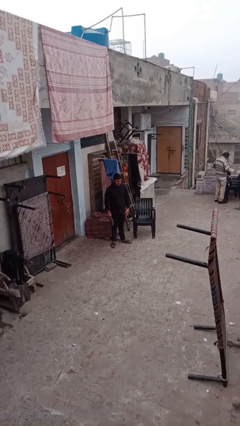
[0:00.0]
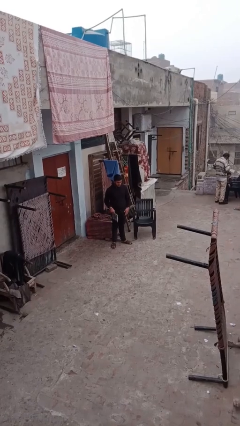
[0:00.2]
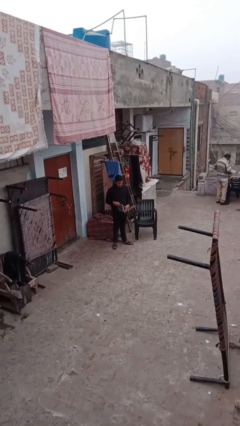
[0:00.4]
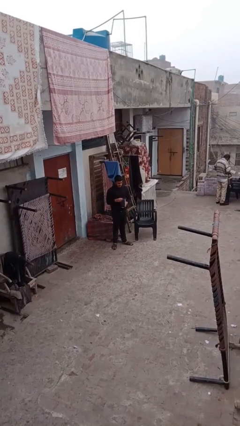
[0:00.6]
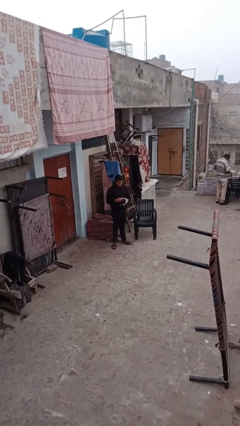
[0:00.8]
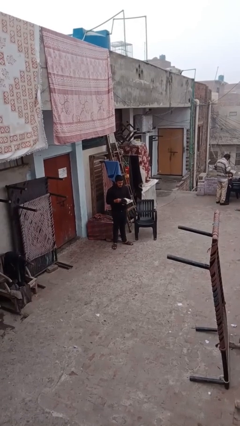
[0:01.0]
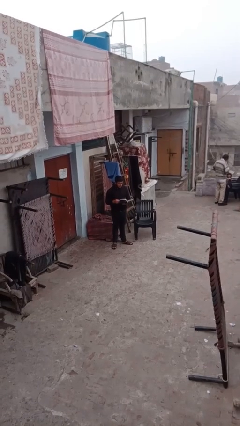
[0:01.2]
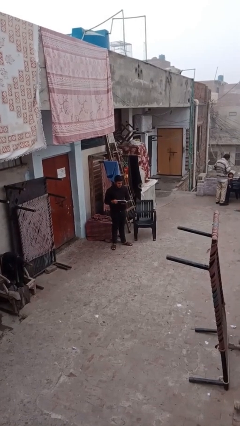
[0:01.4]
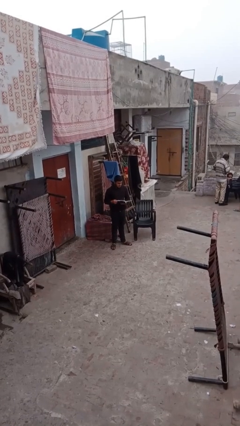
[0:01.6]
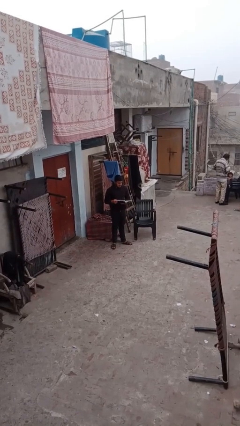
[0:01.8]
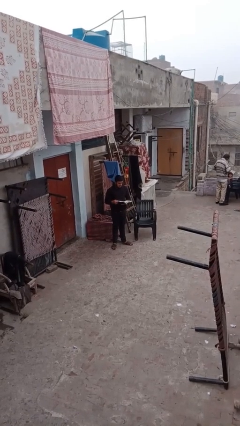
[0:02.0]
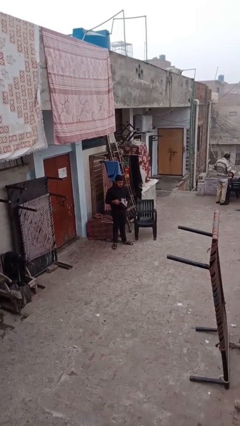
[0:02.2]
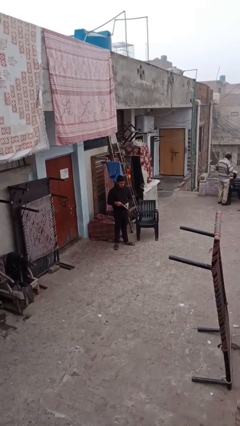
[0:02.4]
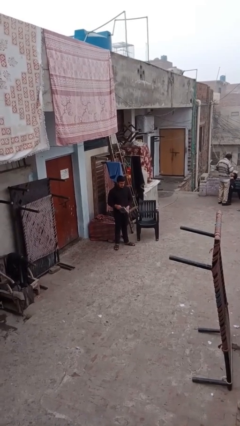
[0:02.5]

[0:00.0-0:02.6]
person reads document

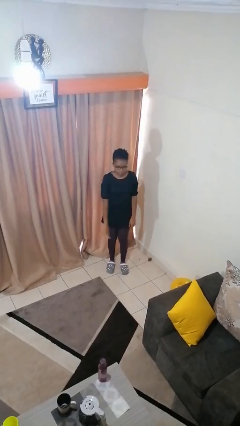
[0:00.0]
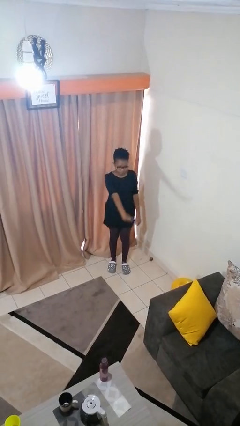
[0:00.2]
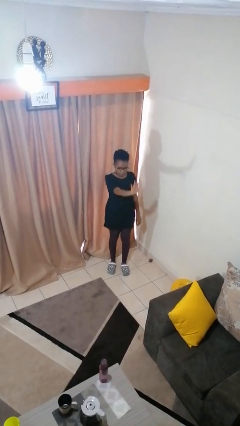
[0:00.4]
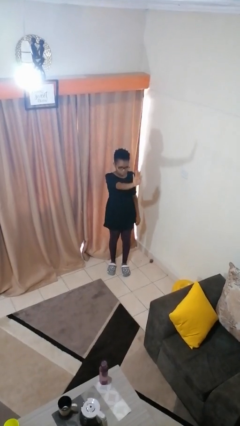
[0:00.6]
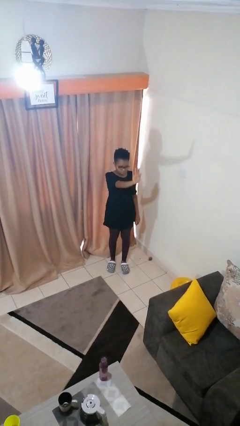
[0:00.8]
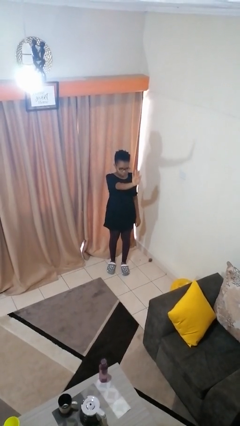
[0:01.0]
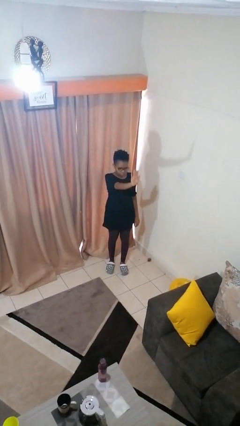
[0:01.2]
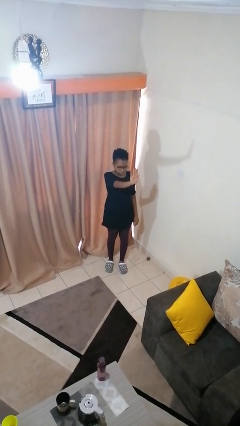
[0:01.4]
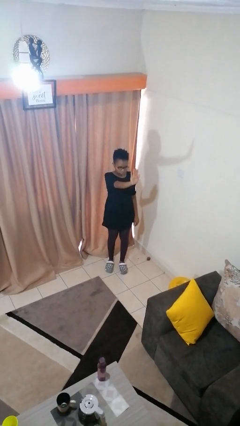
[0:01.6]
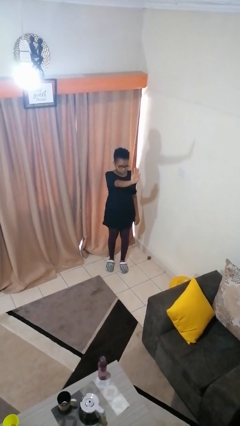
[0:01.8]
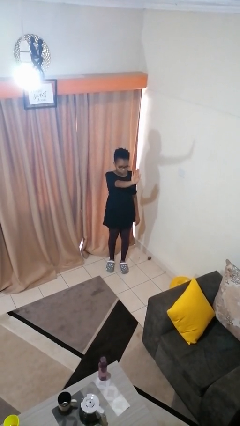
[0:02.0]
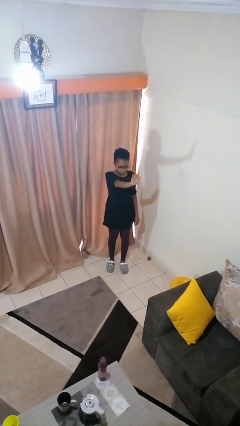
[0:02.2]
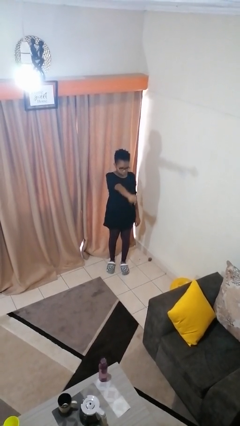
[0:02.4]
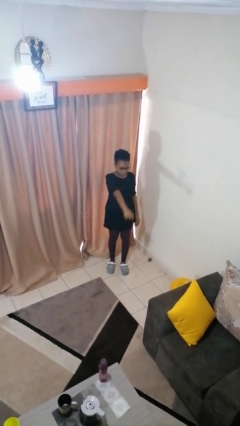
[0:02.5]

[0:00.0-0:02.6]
person gestures stop

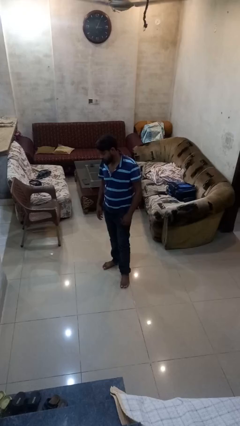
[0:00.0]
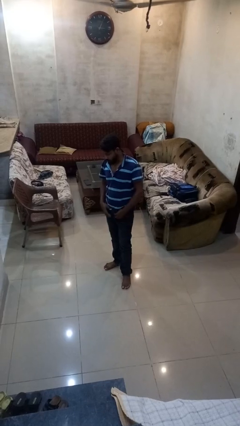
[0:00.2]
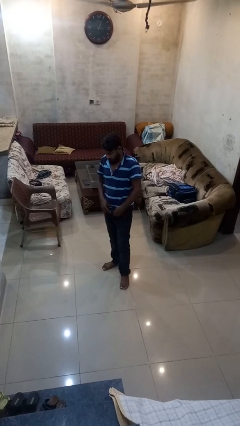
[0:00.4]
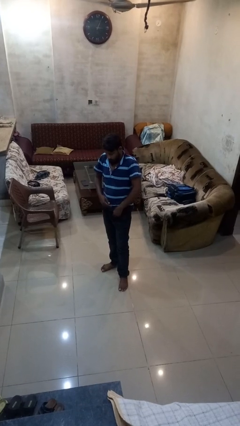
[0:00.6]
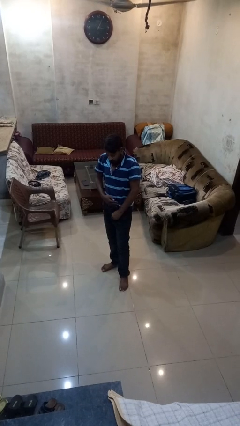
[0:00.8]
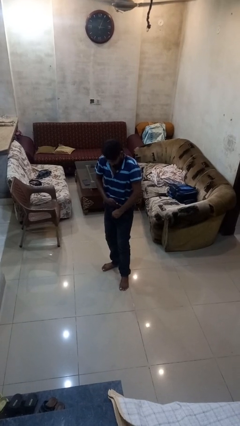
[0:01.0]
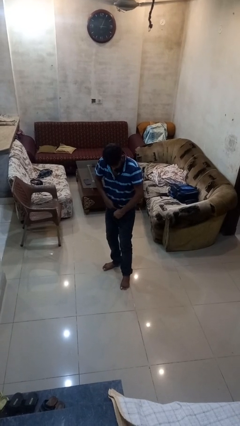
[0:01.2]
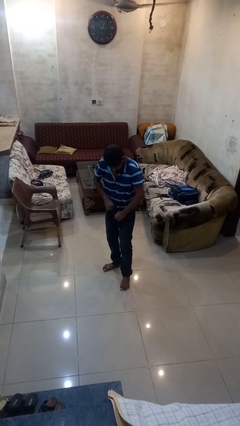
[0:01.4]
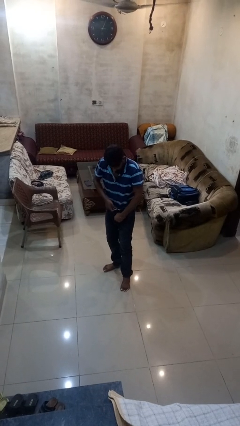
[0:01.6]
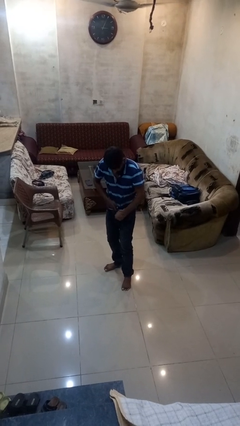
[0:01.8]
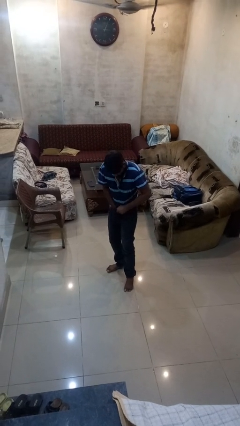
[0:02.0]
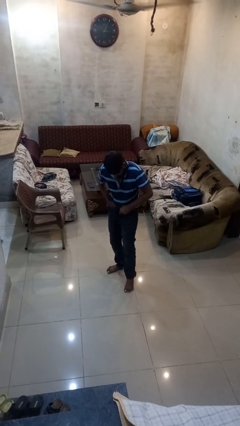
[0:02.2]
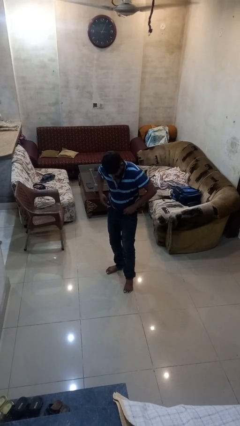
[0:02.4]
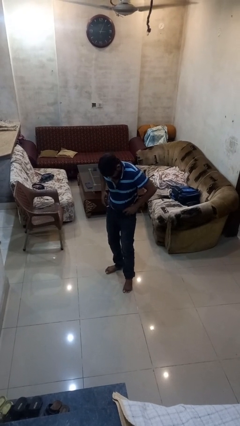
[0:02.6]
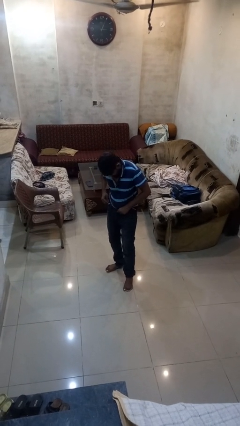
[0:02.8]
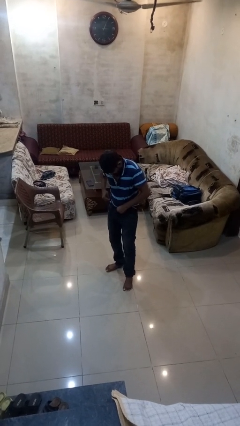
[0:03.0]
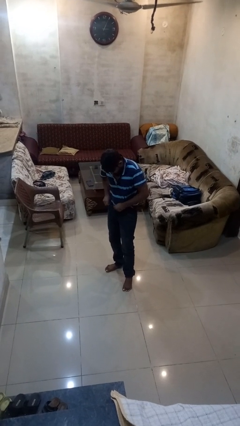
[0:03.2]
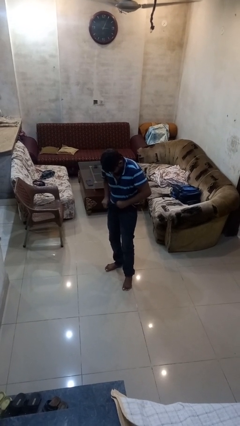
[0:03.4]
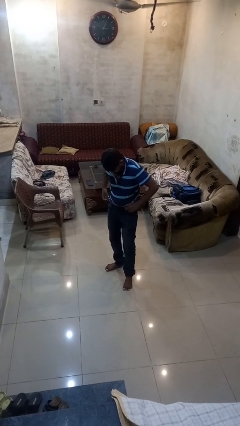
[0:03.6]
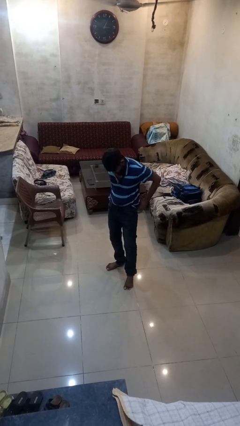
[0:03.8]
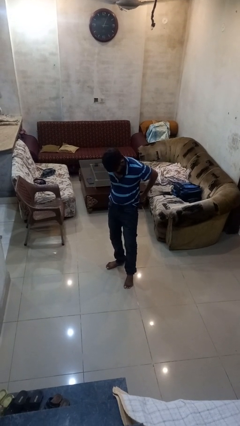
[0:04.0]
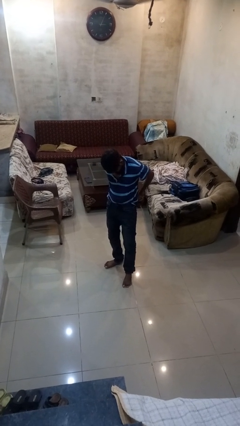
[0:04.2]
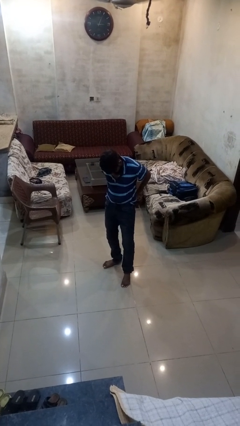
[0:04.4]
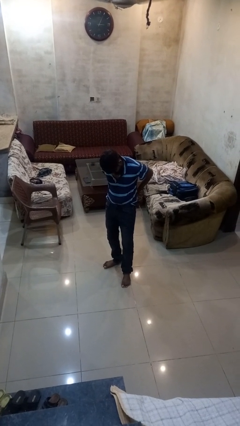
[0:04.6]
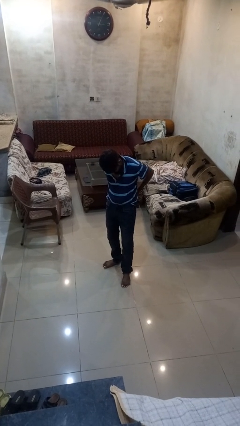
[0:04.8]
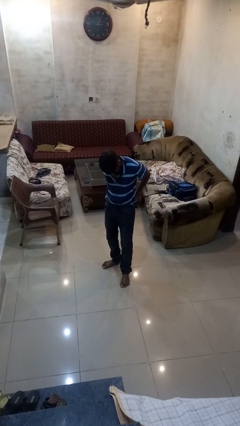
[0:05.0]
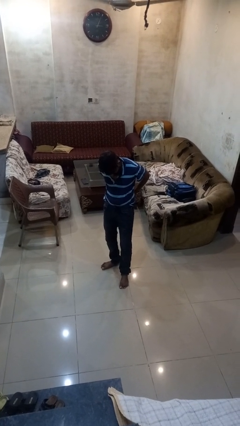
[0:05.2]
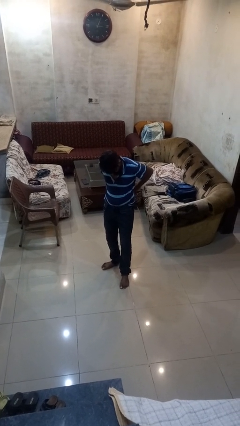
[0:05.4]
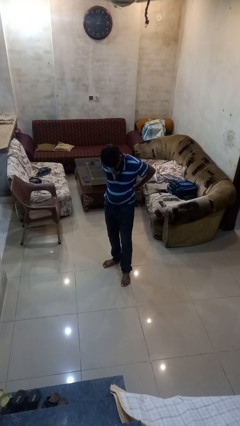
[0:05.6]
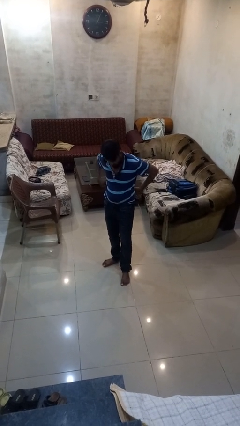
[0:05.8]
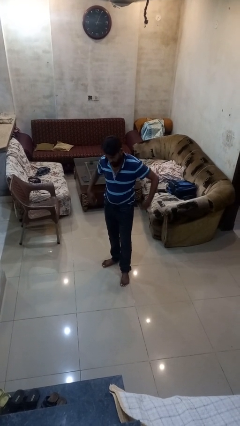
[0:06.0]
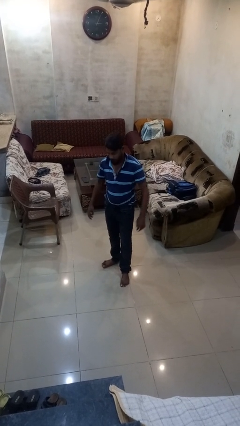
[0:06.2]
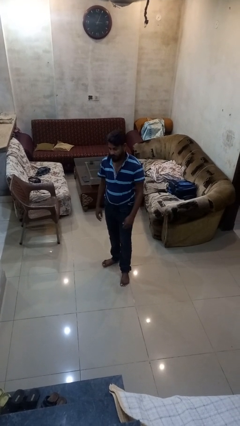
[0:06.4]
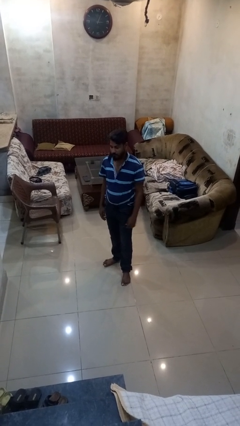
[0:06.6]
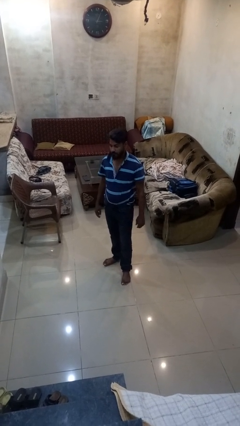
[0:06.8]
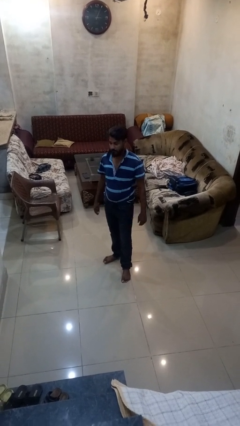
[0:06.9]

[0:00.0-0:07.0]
person tucks in shirt

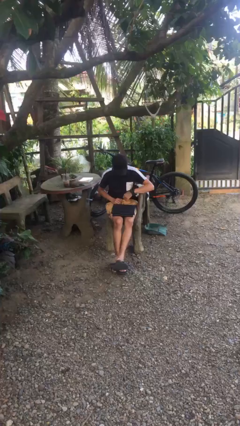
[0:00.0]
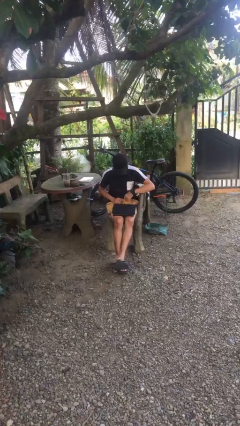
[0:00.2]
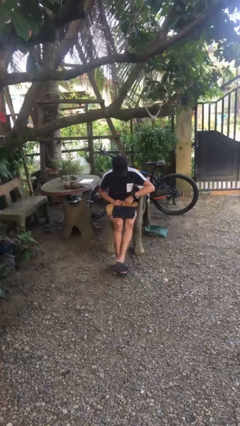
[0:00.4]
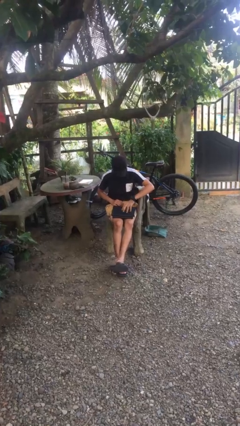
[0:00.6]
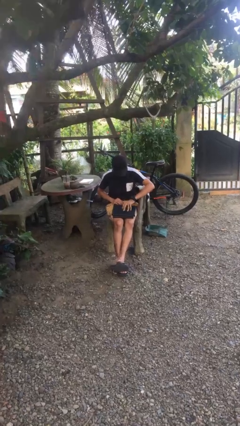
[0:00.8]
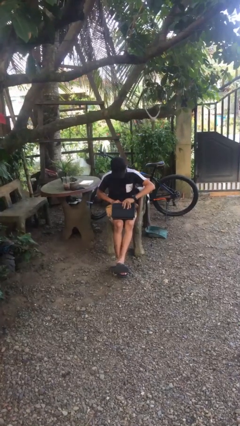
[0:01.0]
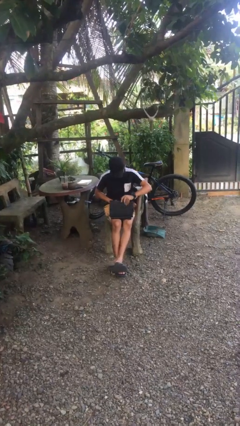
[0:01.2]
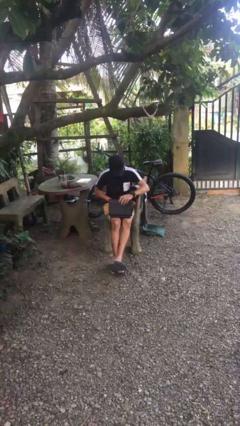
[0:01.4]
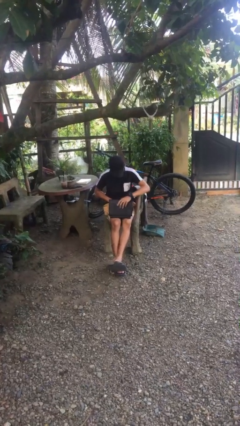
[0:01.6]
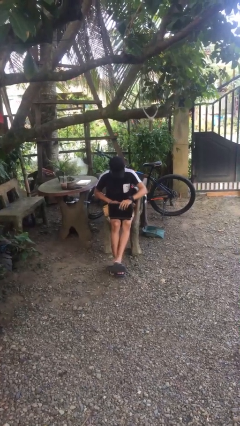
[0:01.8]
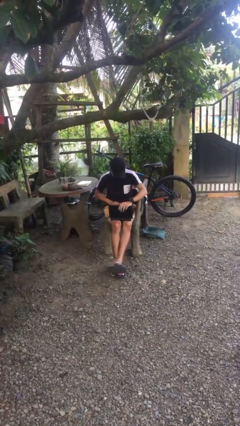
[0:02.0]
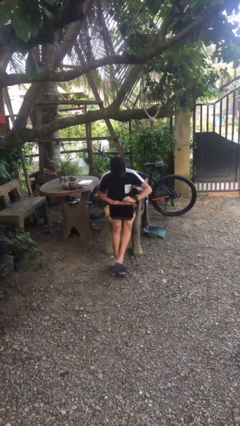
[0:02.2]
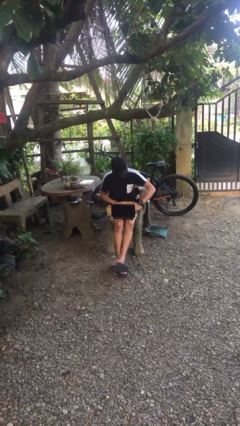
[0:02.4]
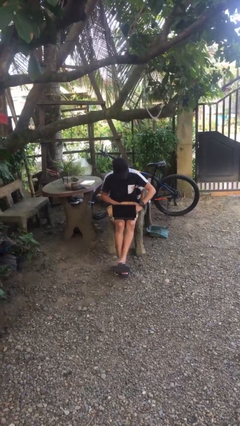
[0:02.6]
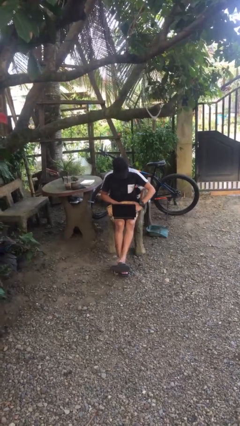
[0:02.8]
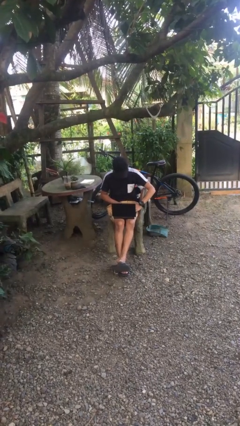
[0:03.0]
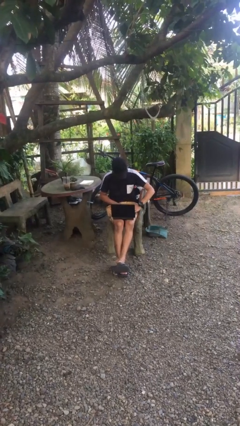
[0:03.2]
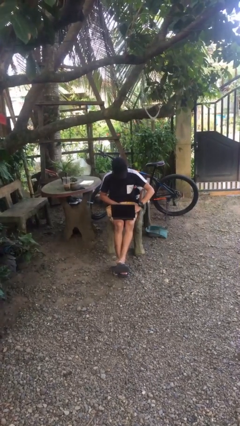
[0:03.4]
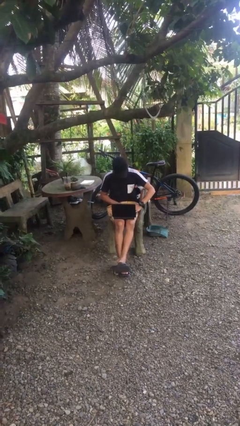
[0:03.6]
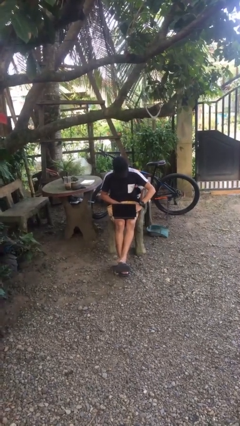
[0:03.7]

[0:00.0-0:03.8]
person interacts with laptop

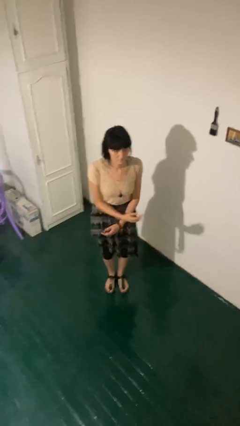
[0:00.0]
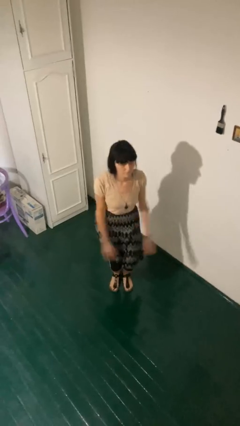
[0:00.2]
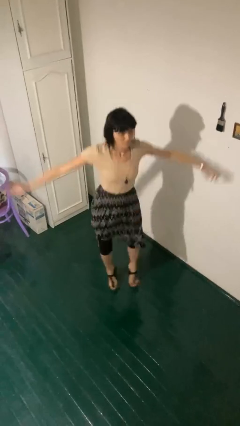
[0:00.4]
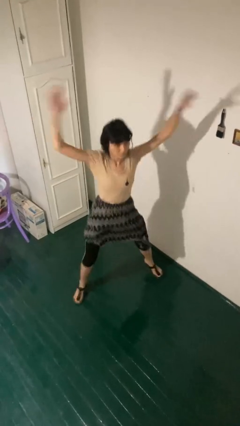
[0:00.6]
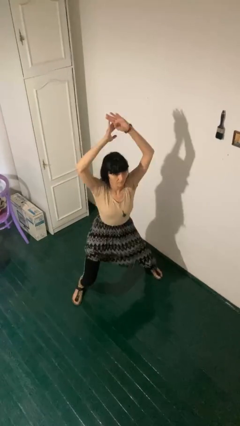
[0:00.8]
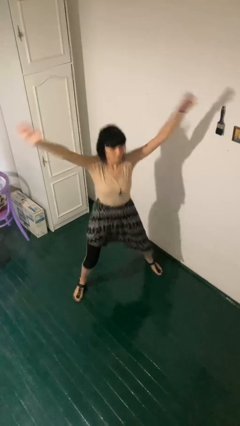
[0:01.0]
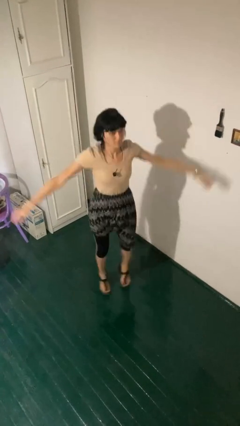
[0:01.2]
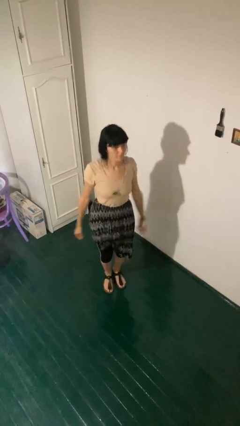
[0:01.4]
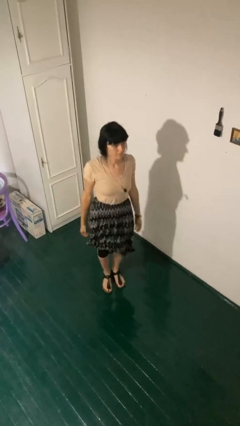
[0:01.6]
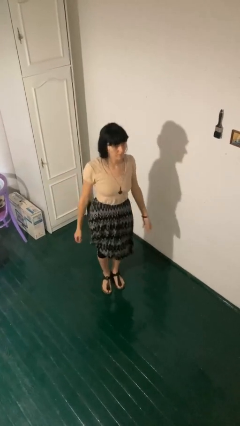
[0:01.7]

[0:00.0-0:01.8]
person exercises with jumping jacks
